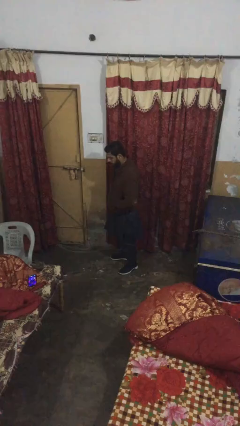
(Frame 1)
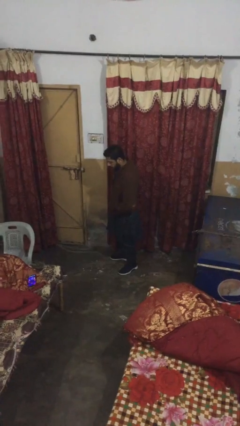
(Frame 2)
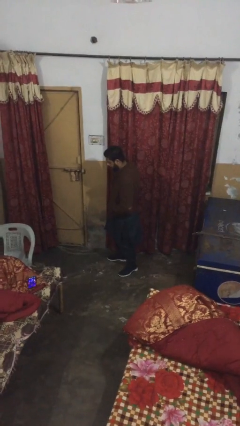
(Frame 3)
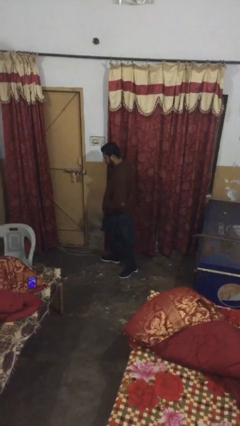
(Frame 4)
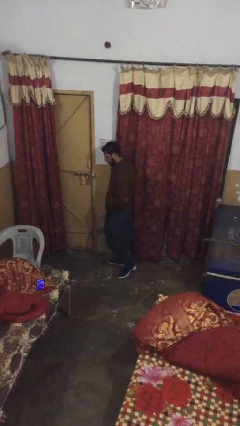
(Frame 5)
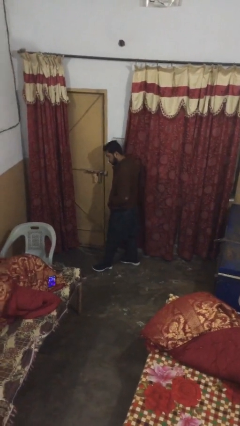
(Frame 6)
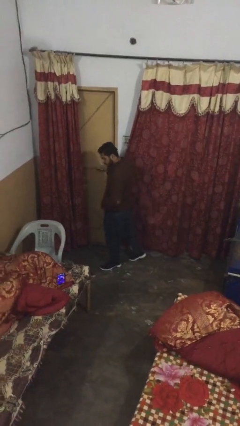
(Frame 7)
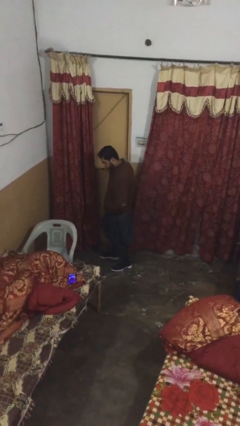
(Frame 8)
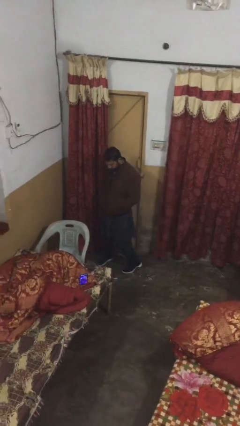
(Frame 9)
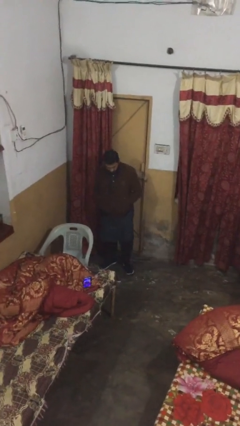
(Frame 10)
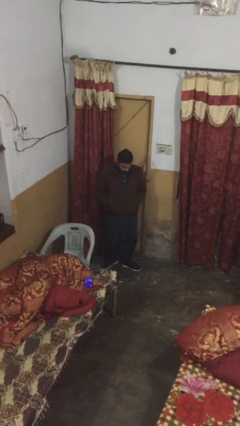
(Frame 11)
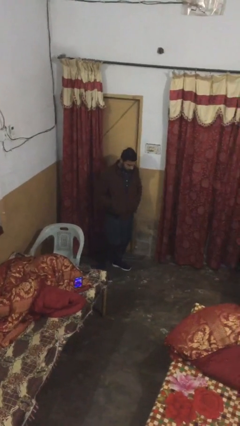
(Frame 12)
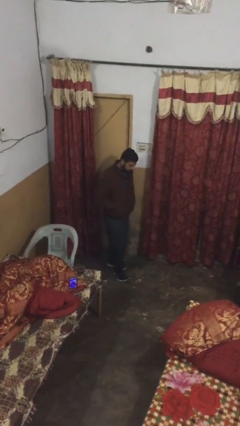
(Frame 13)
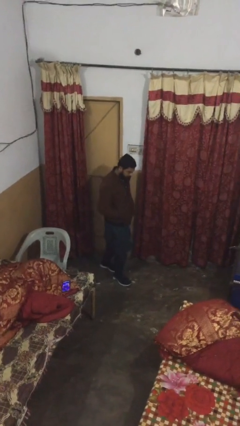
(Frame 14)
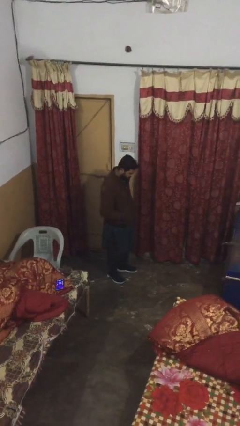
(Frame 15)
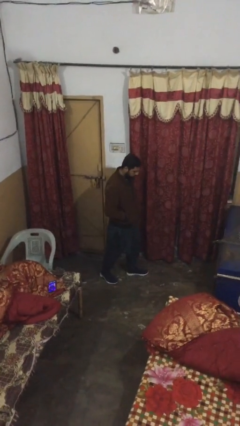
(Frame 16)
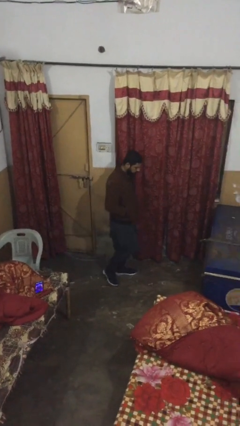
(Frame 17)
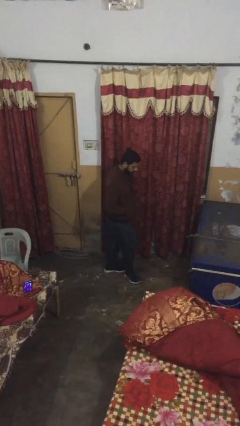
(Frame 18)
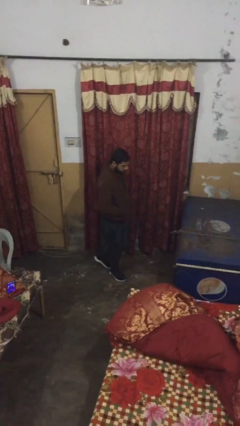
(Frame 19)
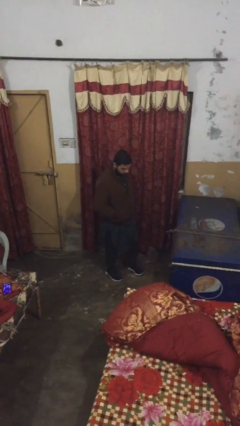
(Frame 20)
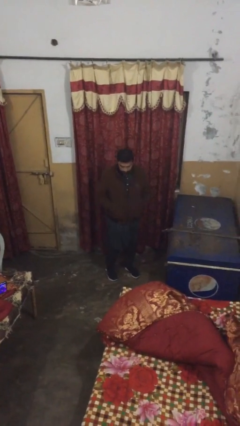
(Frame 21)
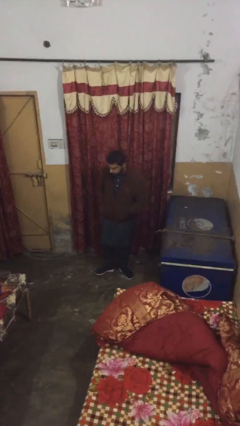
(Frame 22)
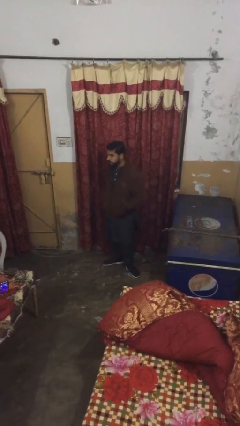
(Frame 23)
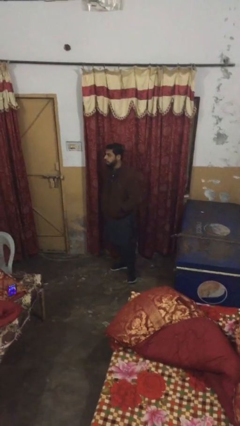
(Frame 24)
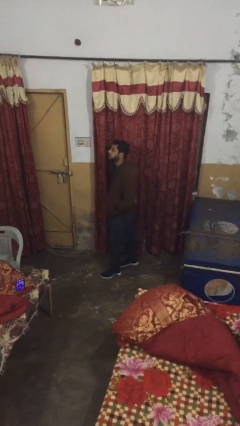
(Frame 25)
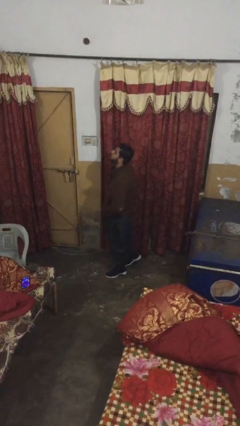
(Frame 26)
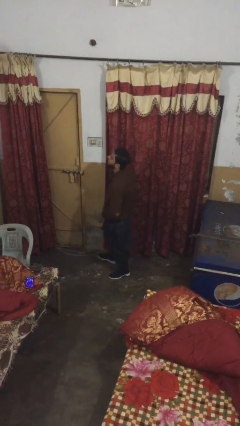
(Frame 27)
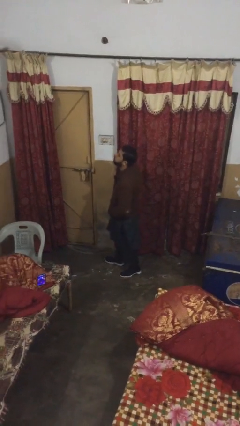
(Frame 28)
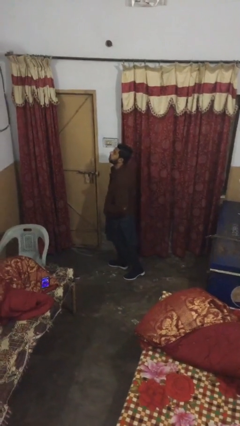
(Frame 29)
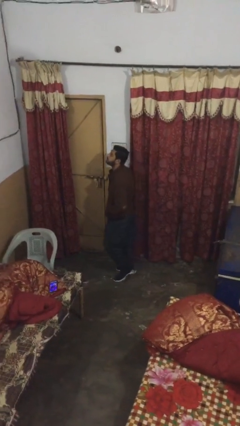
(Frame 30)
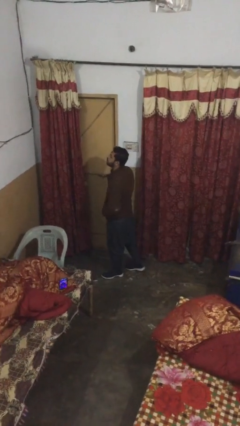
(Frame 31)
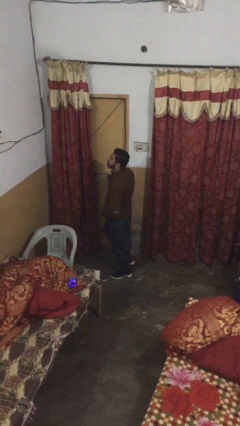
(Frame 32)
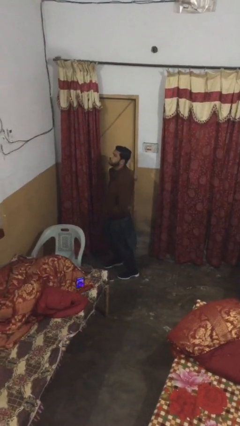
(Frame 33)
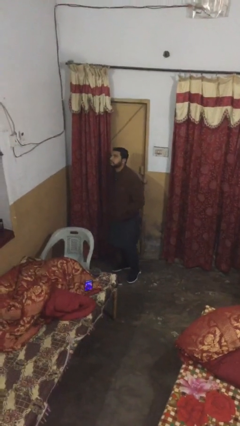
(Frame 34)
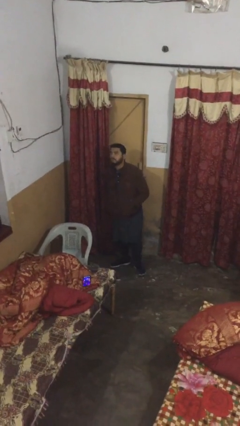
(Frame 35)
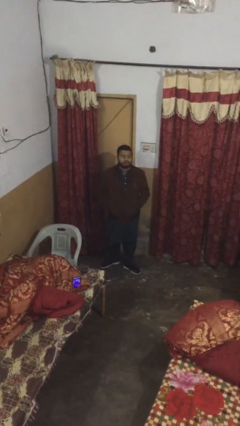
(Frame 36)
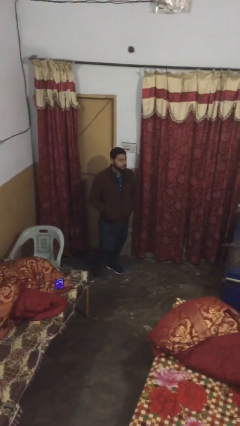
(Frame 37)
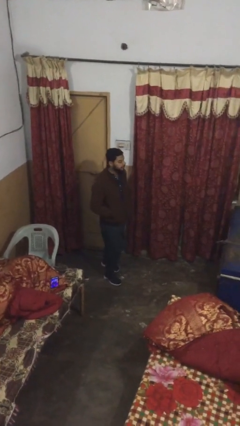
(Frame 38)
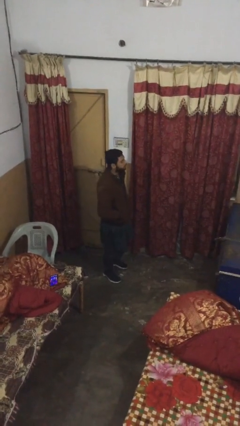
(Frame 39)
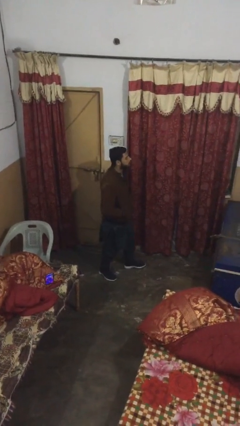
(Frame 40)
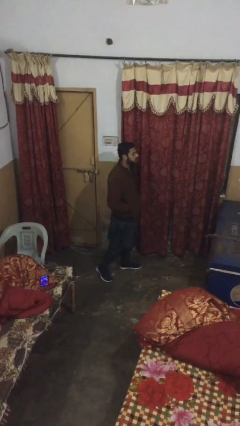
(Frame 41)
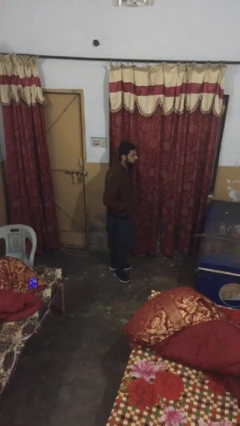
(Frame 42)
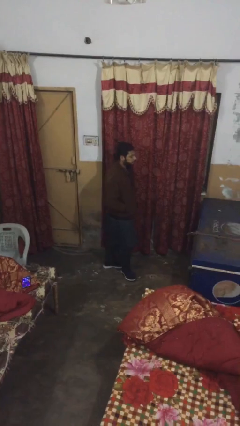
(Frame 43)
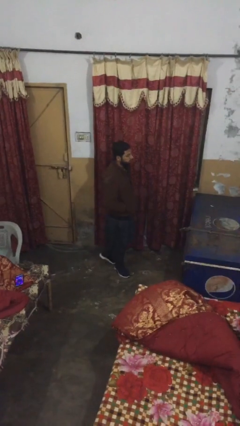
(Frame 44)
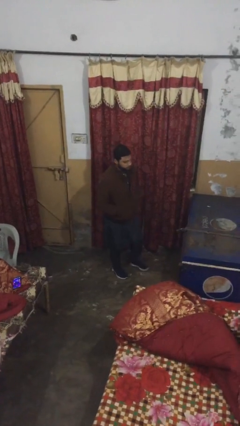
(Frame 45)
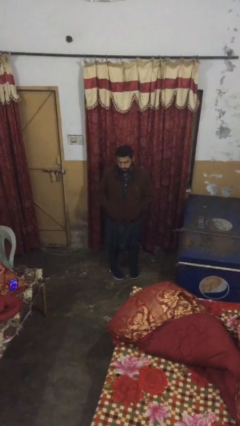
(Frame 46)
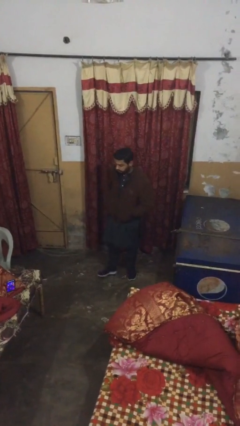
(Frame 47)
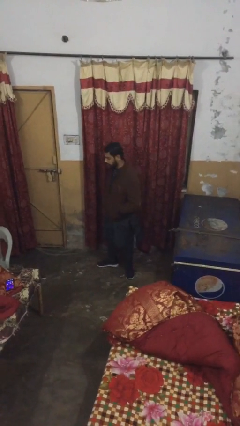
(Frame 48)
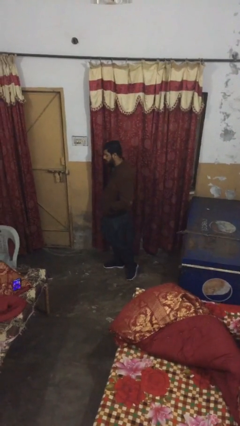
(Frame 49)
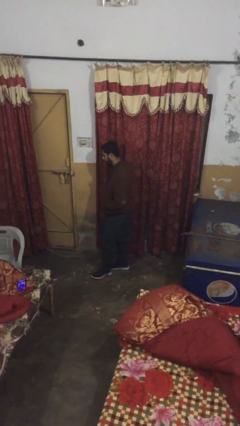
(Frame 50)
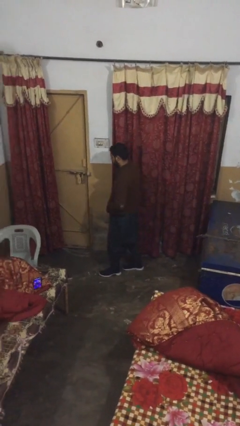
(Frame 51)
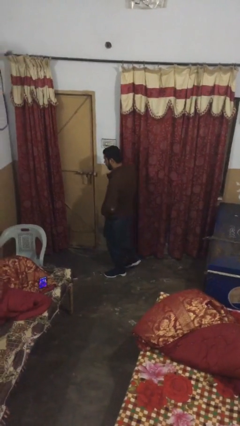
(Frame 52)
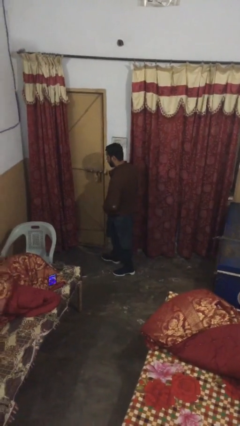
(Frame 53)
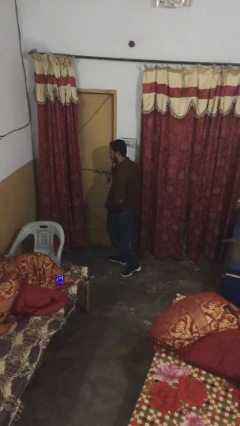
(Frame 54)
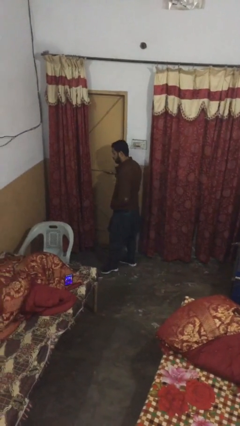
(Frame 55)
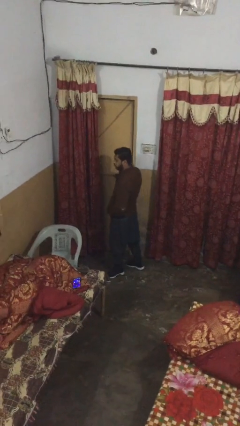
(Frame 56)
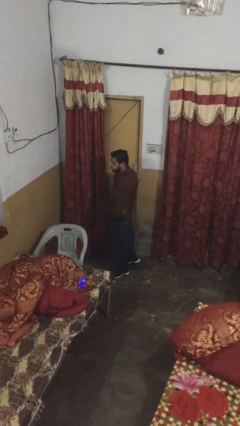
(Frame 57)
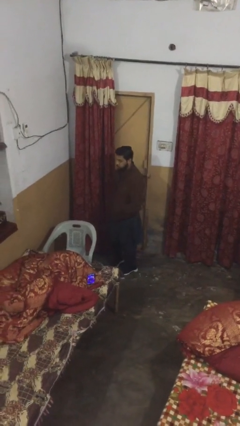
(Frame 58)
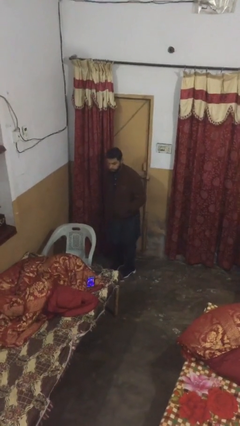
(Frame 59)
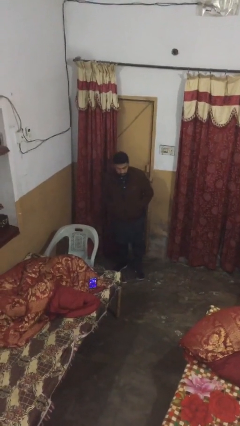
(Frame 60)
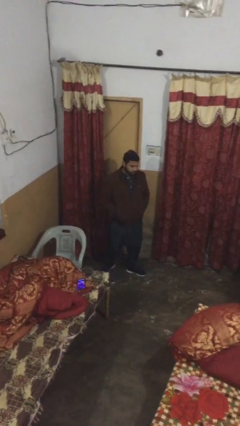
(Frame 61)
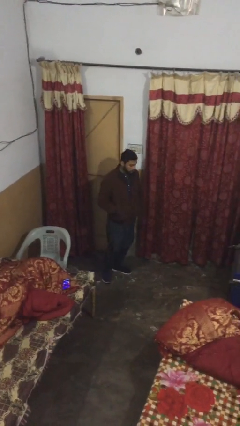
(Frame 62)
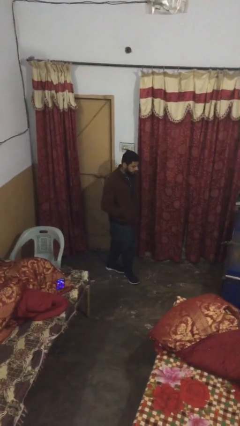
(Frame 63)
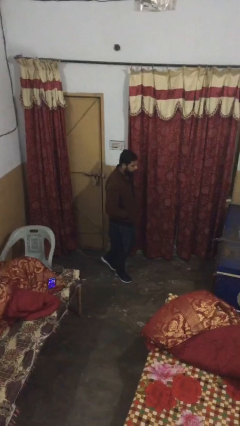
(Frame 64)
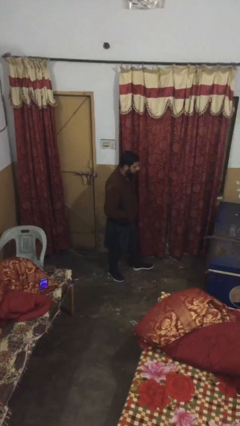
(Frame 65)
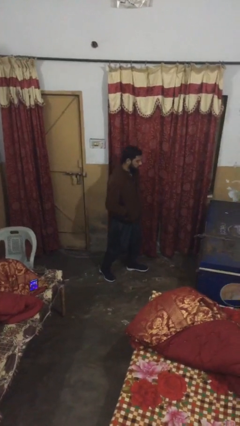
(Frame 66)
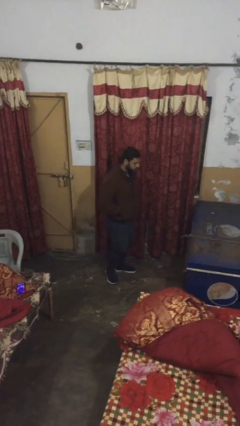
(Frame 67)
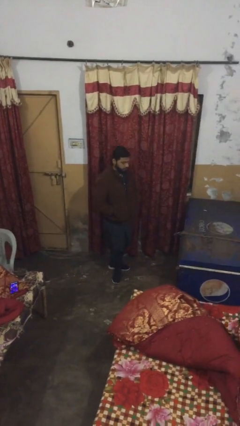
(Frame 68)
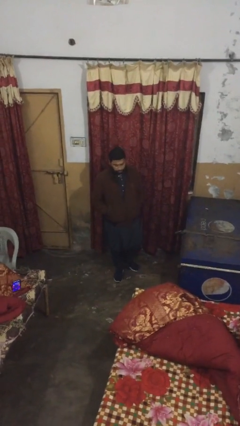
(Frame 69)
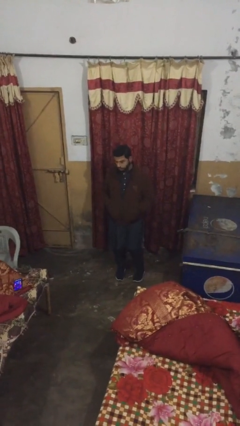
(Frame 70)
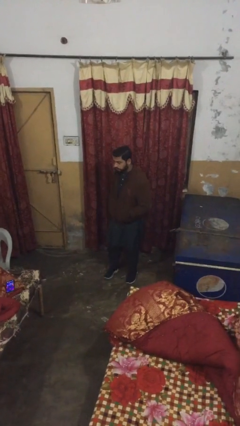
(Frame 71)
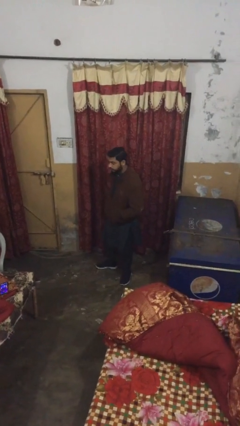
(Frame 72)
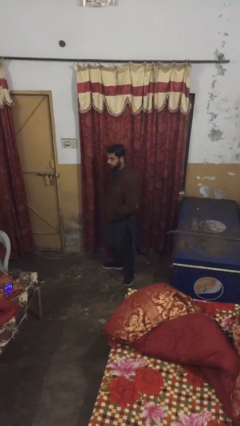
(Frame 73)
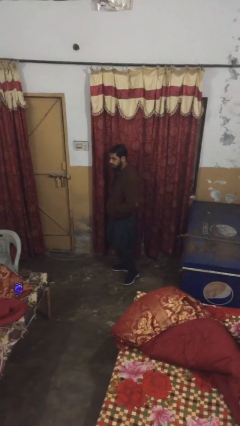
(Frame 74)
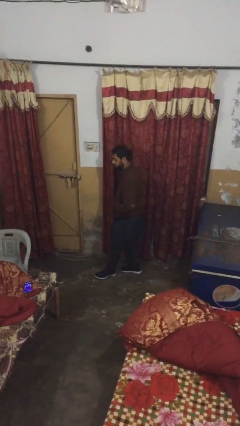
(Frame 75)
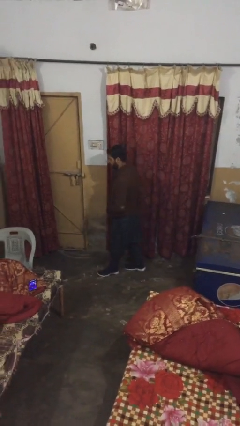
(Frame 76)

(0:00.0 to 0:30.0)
person walks

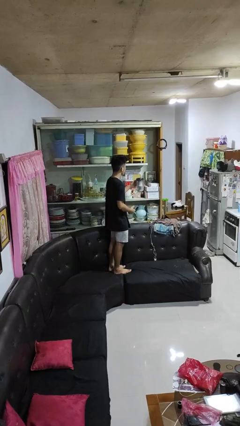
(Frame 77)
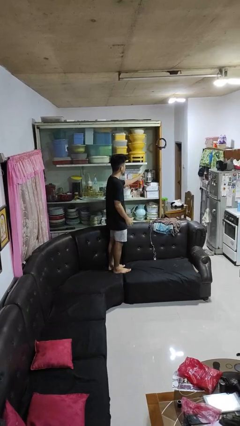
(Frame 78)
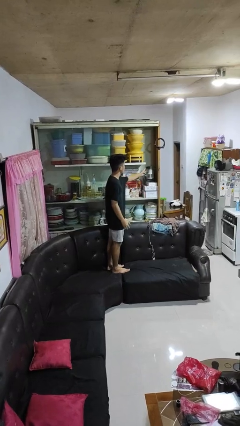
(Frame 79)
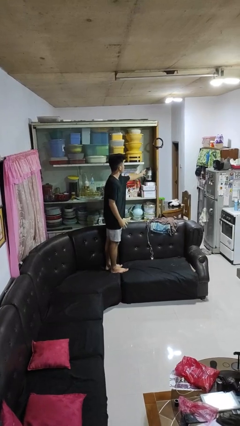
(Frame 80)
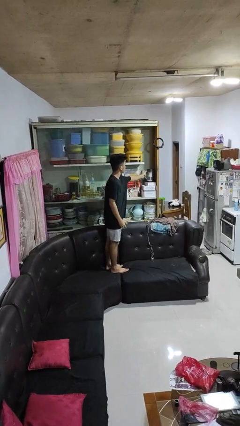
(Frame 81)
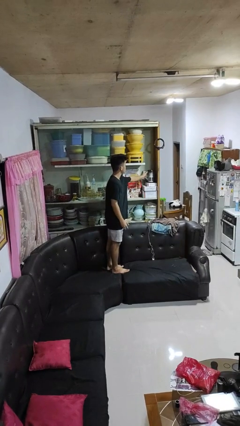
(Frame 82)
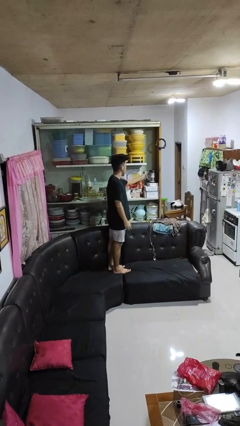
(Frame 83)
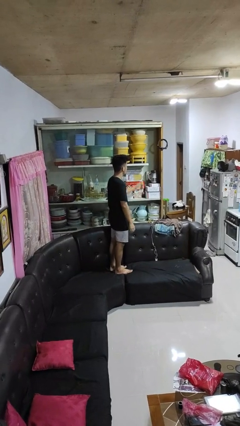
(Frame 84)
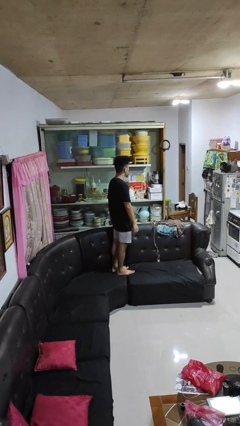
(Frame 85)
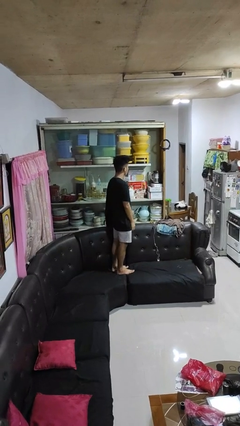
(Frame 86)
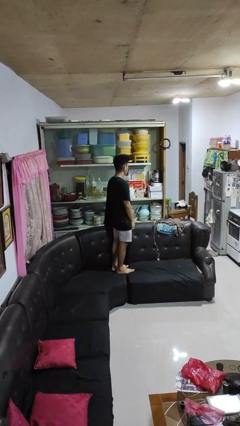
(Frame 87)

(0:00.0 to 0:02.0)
person puts down object into cabinet

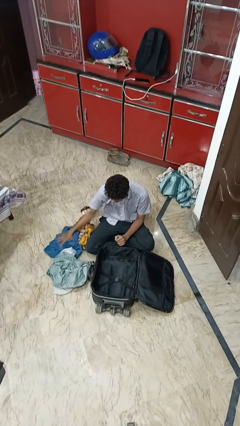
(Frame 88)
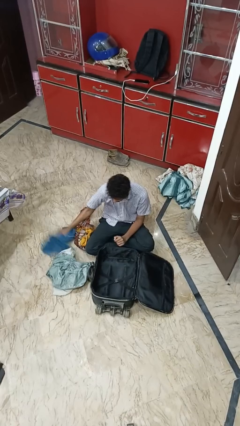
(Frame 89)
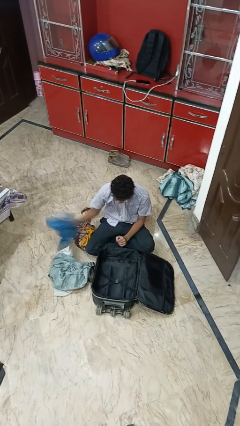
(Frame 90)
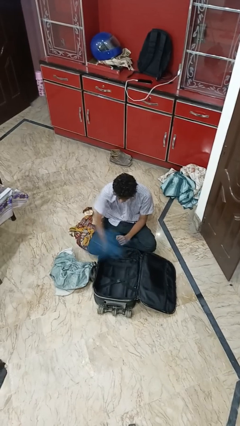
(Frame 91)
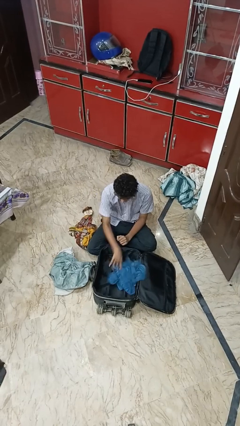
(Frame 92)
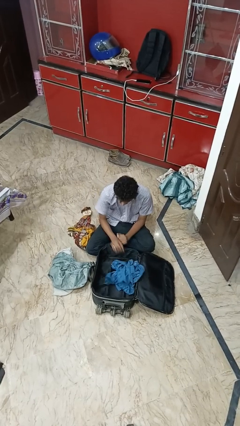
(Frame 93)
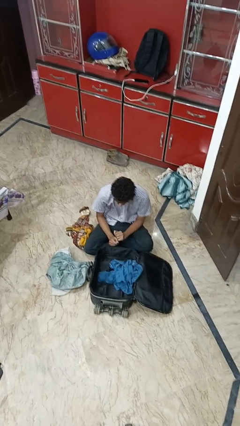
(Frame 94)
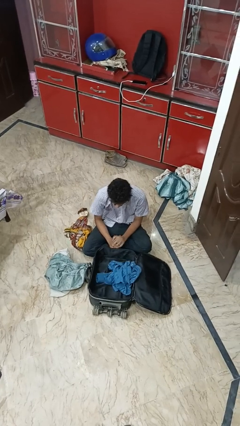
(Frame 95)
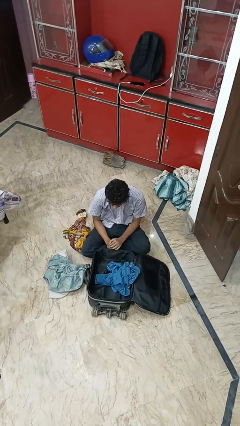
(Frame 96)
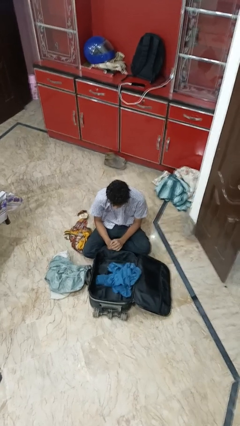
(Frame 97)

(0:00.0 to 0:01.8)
person loads clothes into suitcase
